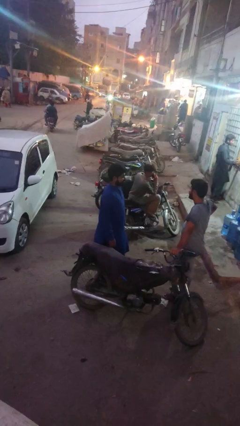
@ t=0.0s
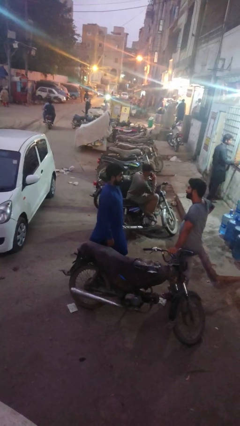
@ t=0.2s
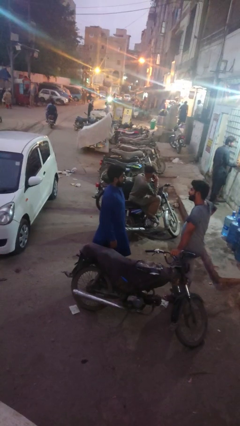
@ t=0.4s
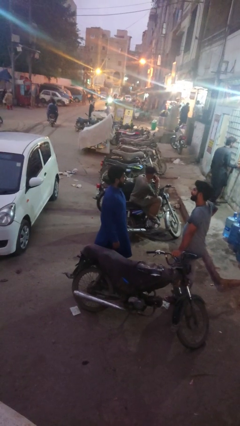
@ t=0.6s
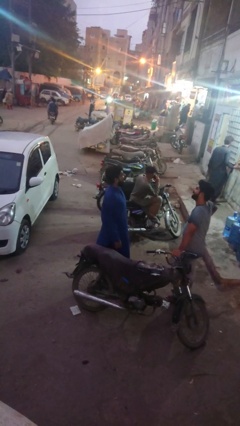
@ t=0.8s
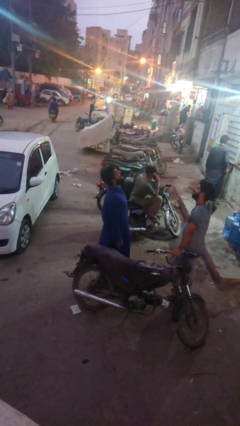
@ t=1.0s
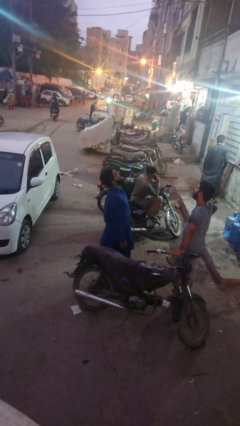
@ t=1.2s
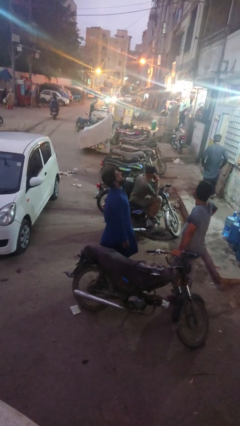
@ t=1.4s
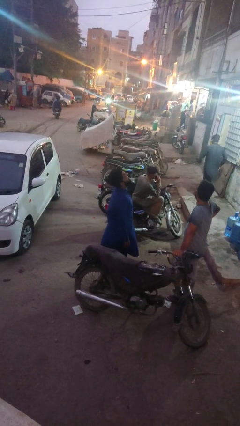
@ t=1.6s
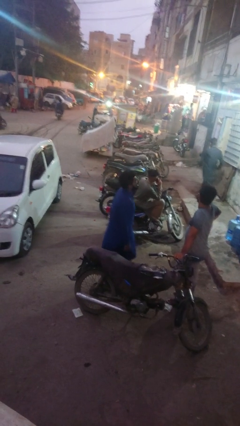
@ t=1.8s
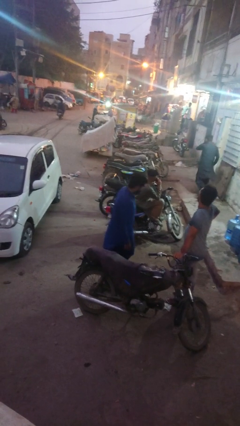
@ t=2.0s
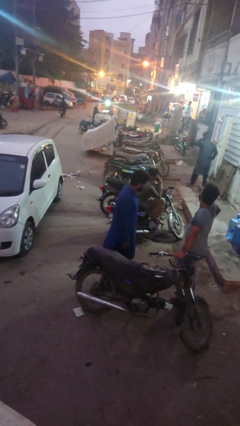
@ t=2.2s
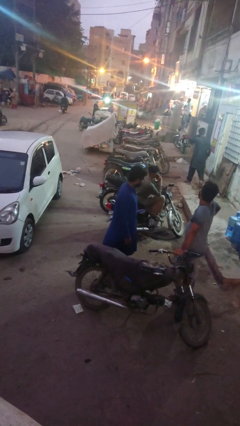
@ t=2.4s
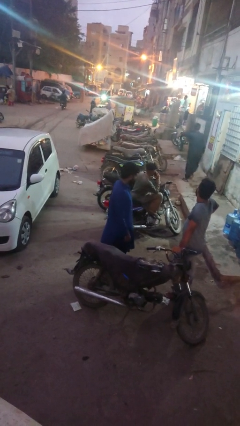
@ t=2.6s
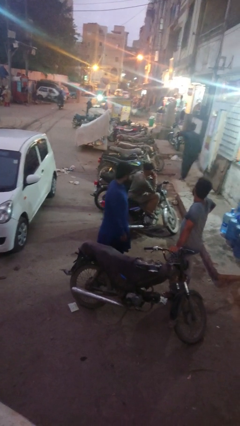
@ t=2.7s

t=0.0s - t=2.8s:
person laughs with person

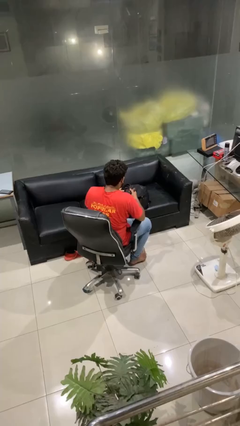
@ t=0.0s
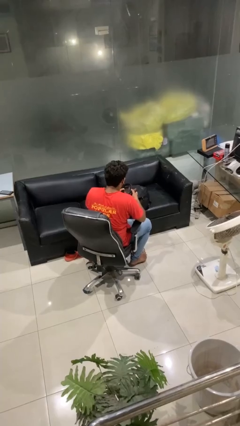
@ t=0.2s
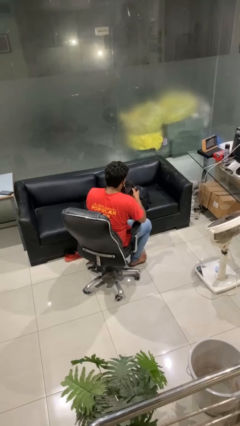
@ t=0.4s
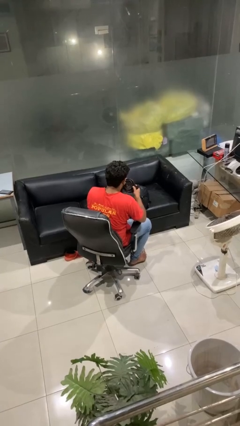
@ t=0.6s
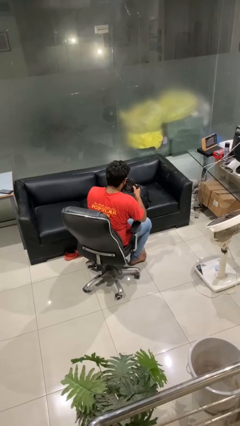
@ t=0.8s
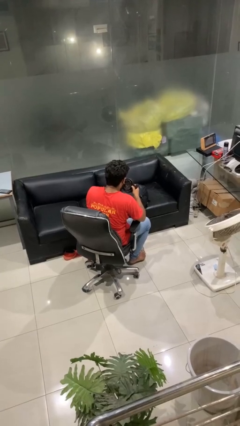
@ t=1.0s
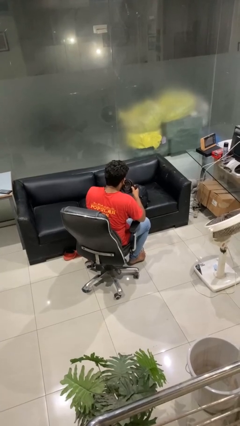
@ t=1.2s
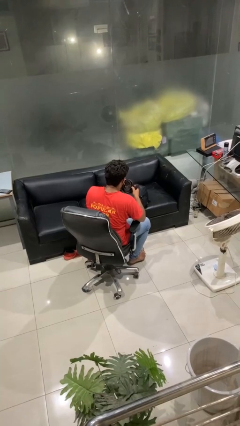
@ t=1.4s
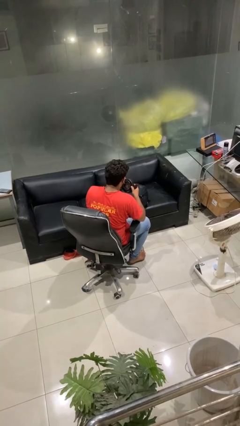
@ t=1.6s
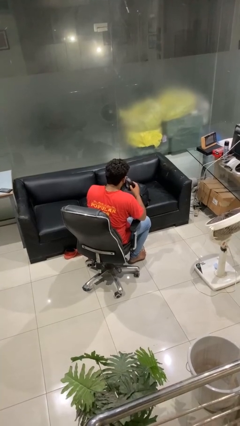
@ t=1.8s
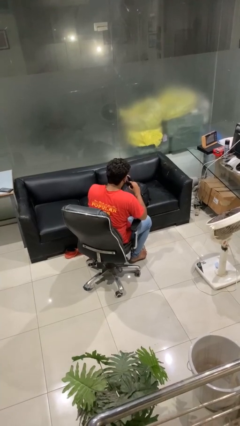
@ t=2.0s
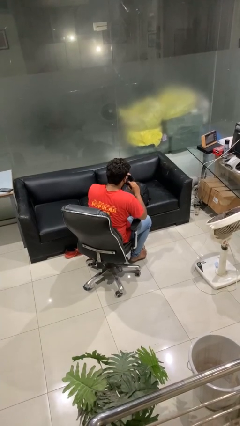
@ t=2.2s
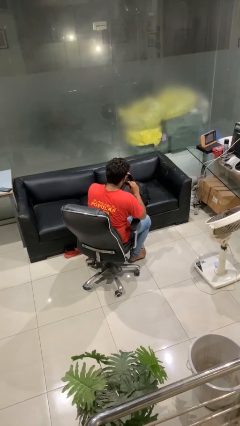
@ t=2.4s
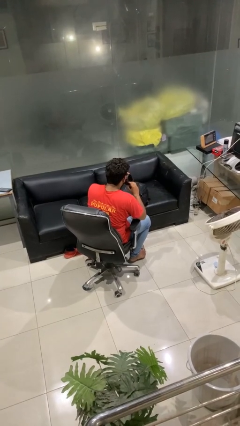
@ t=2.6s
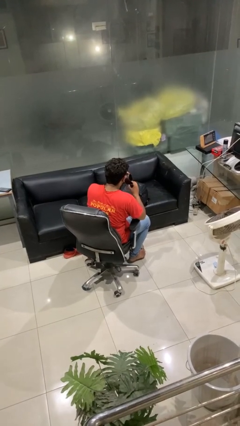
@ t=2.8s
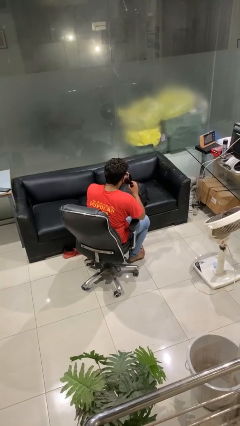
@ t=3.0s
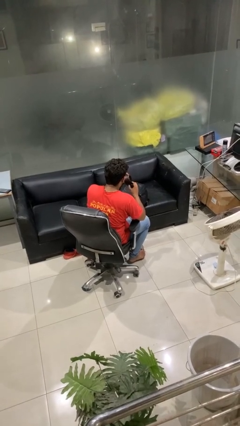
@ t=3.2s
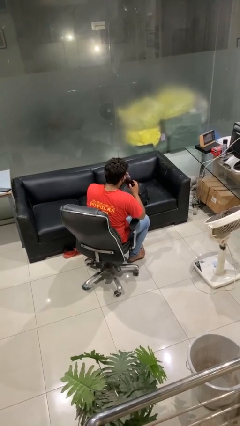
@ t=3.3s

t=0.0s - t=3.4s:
person takes object from backpack

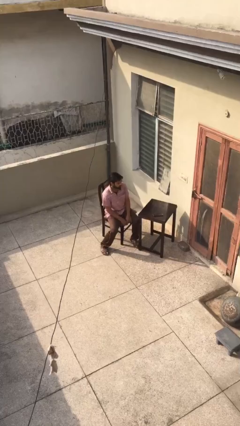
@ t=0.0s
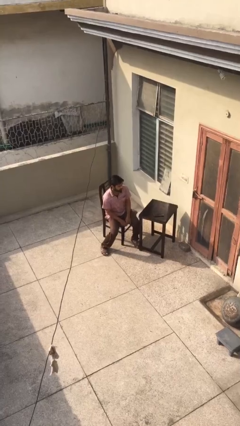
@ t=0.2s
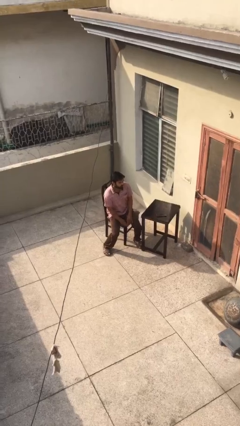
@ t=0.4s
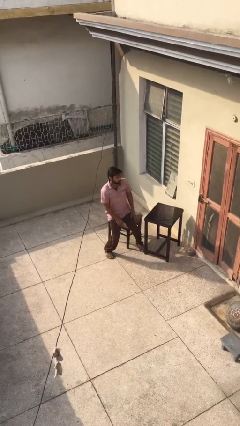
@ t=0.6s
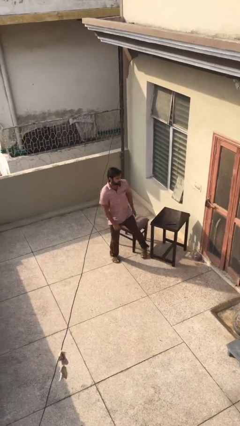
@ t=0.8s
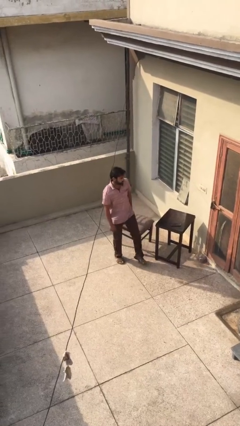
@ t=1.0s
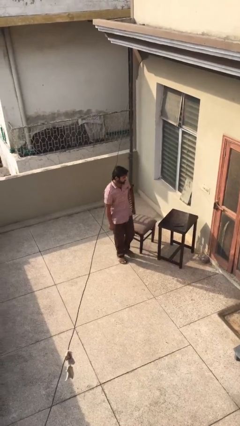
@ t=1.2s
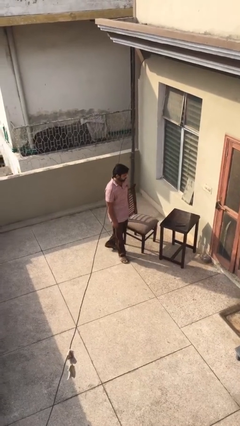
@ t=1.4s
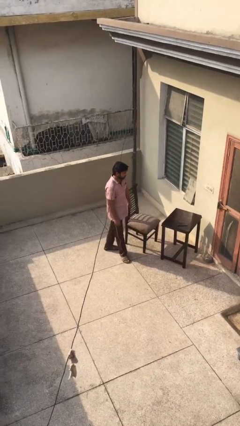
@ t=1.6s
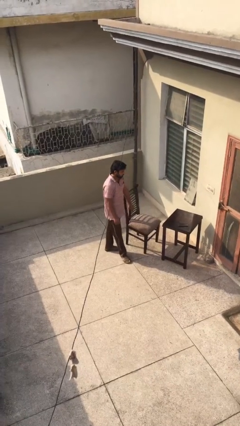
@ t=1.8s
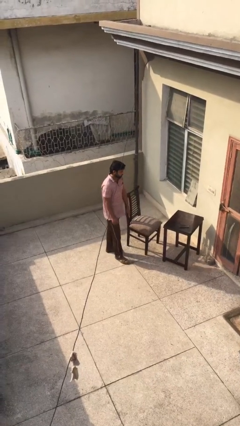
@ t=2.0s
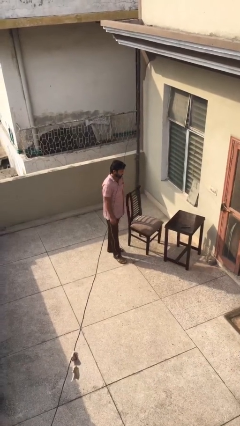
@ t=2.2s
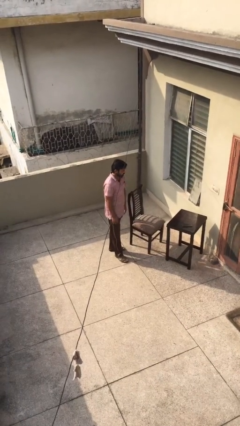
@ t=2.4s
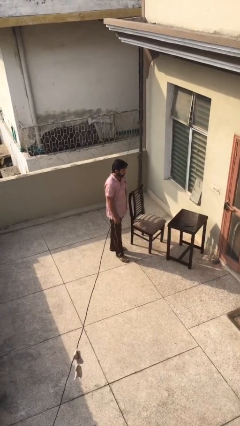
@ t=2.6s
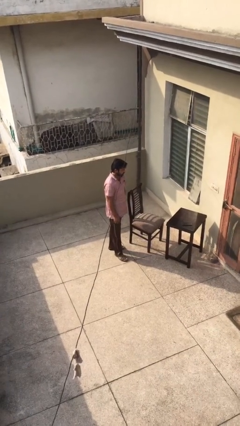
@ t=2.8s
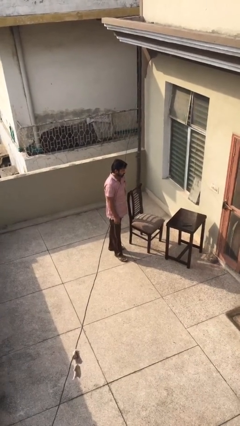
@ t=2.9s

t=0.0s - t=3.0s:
person stands up

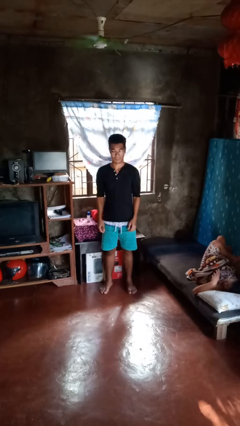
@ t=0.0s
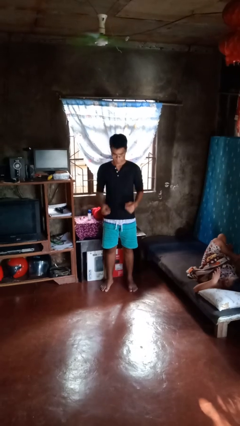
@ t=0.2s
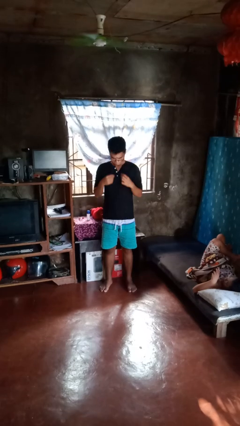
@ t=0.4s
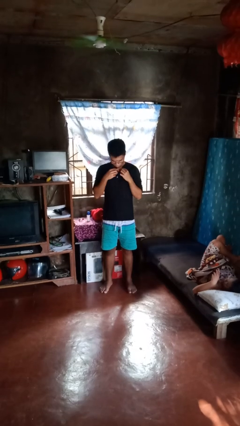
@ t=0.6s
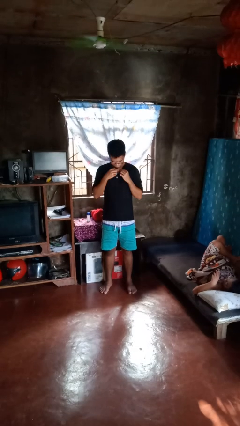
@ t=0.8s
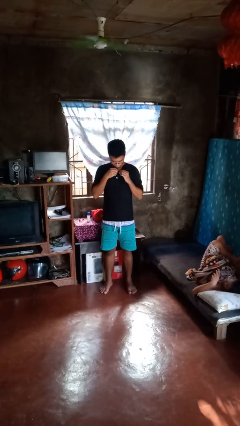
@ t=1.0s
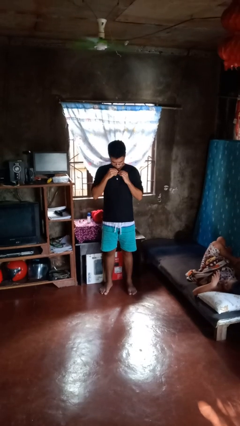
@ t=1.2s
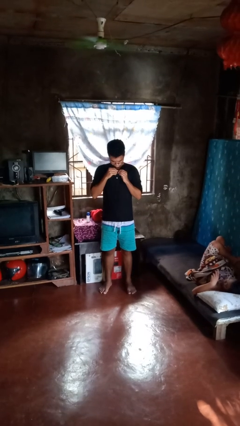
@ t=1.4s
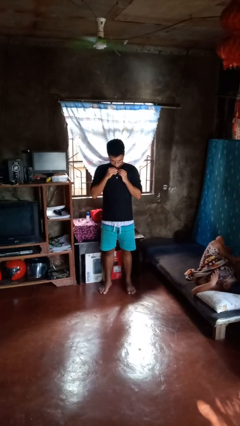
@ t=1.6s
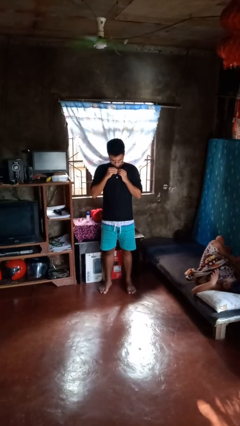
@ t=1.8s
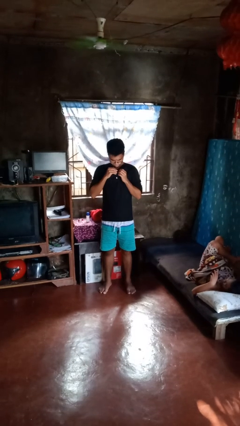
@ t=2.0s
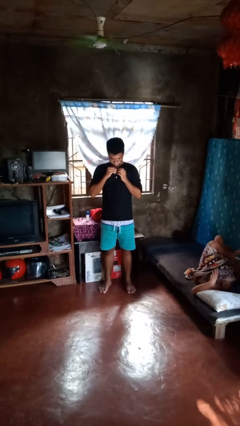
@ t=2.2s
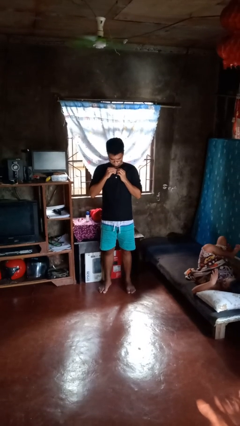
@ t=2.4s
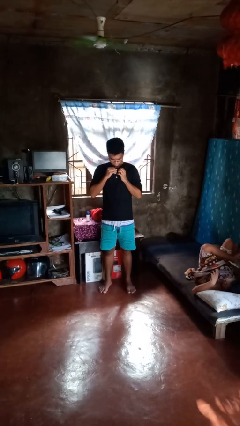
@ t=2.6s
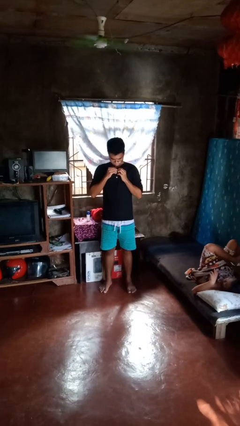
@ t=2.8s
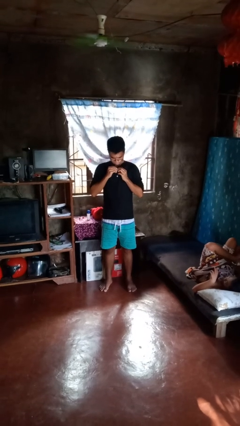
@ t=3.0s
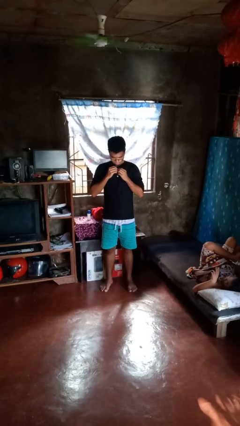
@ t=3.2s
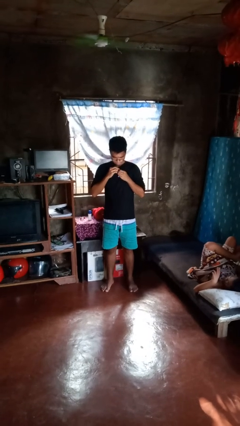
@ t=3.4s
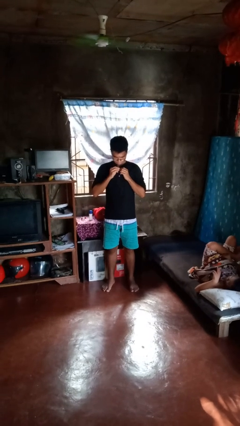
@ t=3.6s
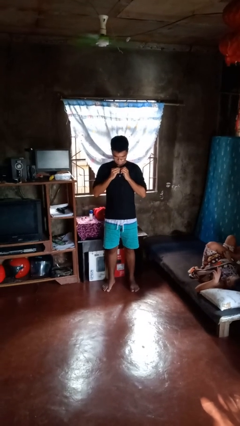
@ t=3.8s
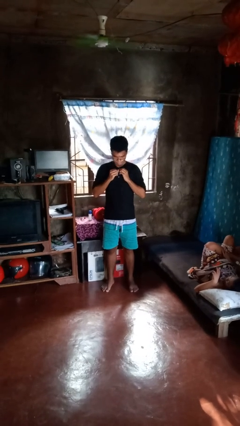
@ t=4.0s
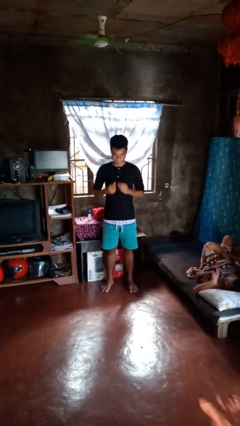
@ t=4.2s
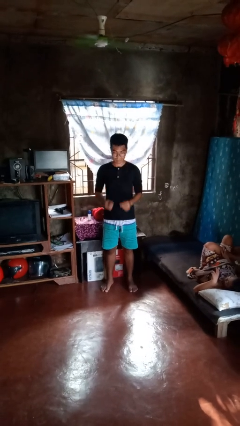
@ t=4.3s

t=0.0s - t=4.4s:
person buttons shirt

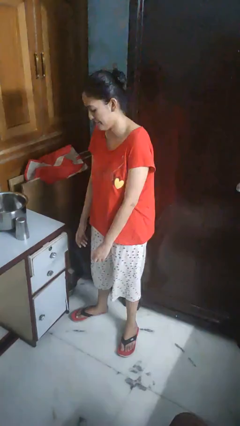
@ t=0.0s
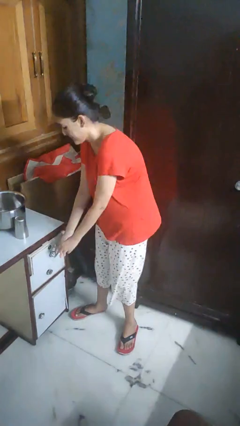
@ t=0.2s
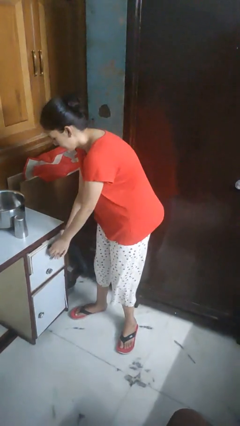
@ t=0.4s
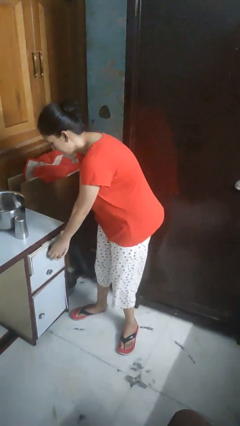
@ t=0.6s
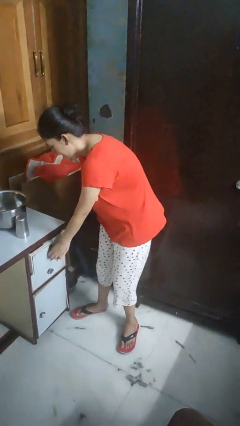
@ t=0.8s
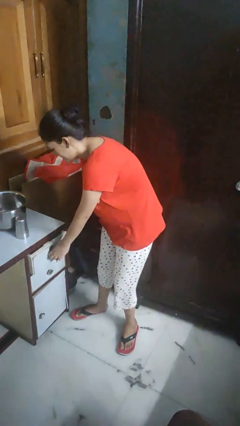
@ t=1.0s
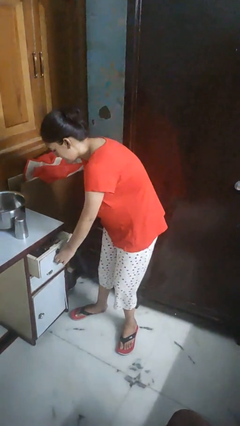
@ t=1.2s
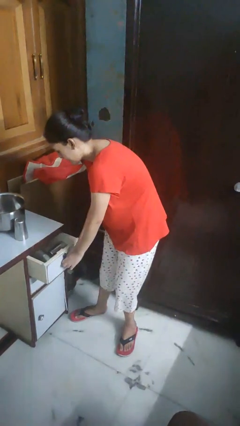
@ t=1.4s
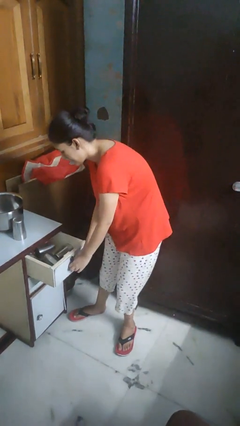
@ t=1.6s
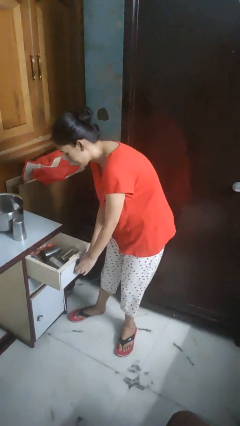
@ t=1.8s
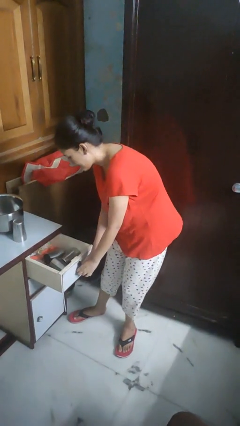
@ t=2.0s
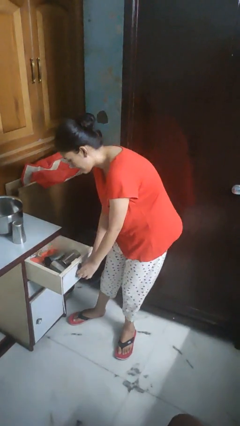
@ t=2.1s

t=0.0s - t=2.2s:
person opens kitchen drawer

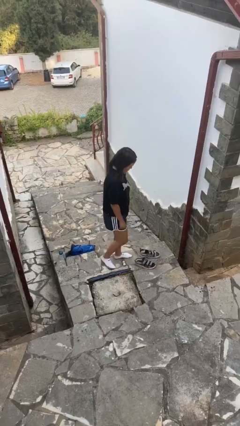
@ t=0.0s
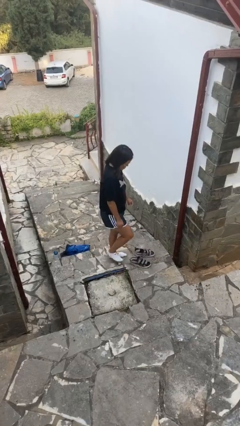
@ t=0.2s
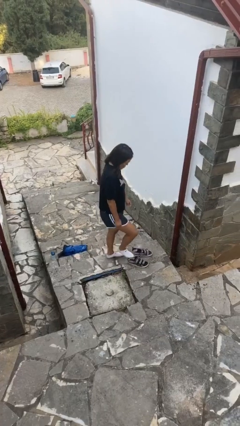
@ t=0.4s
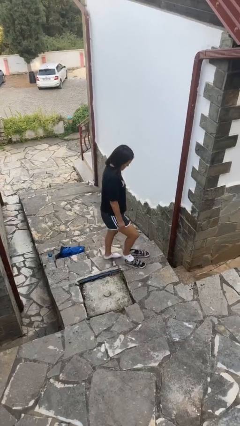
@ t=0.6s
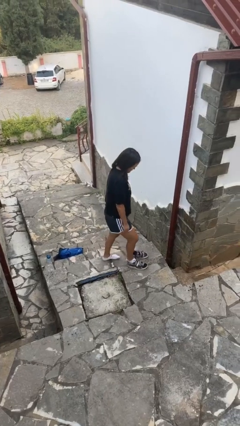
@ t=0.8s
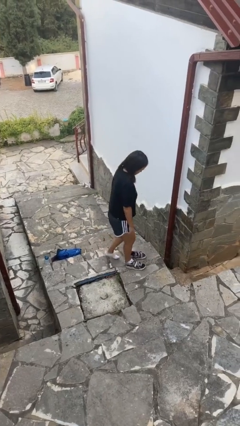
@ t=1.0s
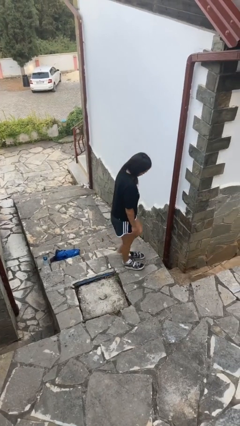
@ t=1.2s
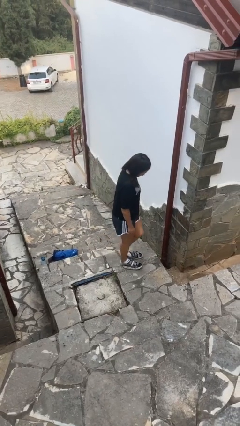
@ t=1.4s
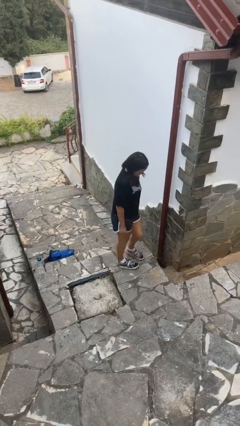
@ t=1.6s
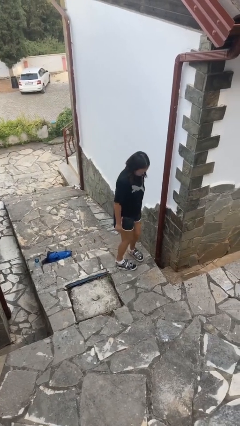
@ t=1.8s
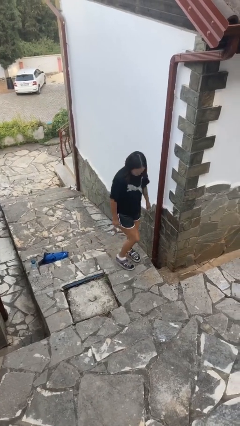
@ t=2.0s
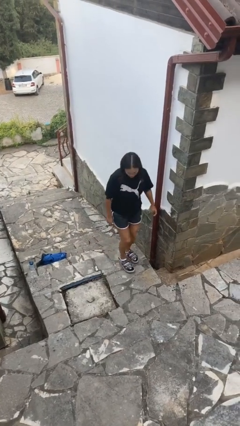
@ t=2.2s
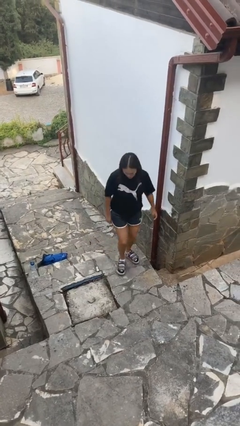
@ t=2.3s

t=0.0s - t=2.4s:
person puts on shoes
